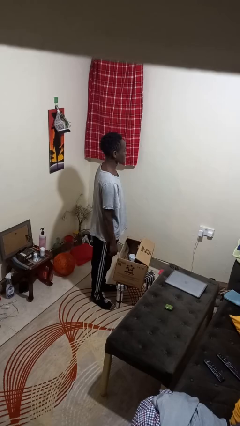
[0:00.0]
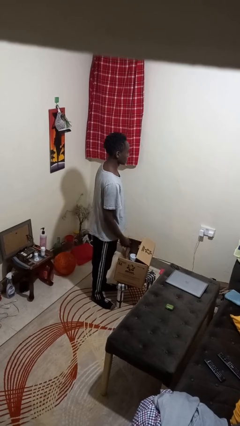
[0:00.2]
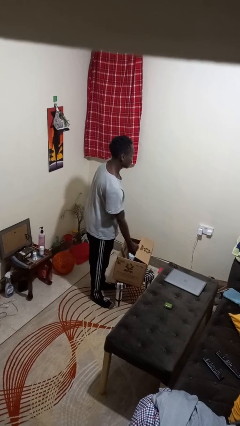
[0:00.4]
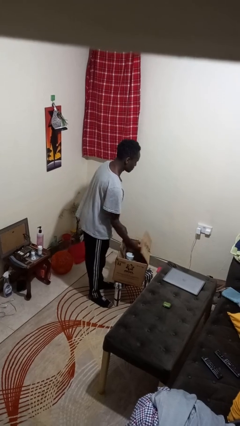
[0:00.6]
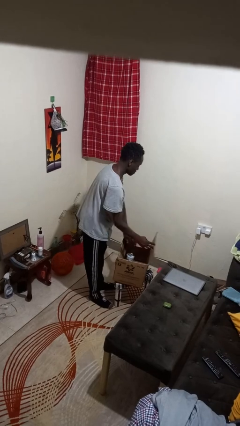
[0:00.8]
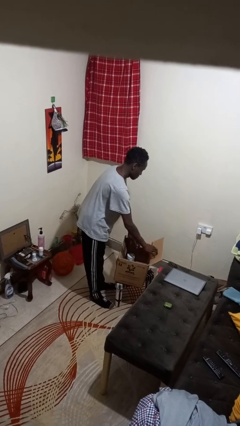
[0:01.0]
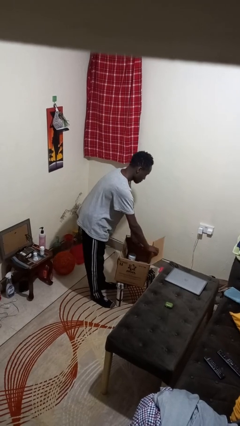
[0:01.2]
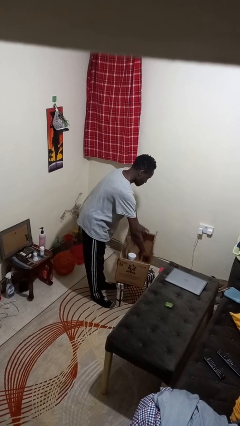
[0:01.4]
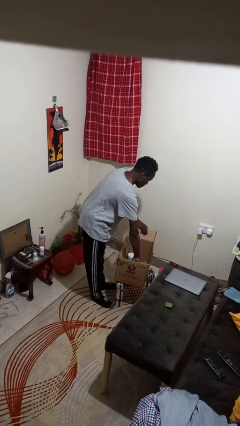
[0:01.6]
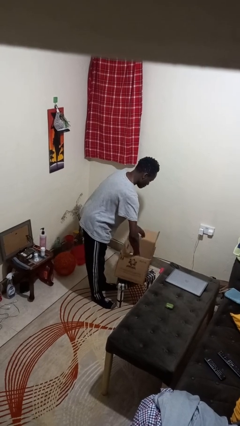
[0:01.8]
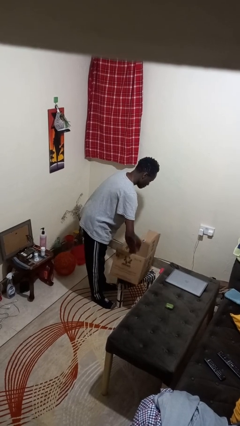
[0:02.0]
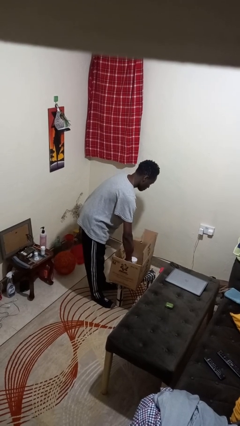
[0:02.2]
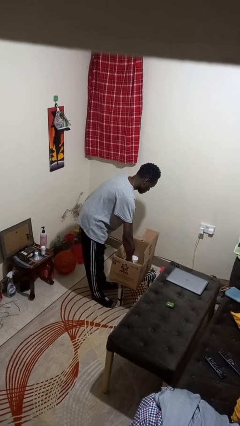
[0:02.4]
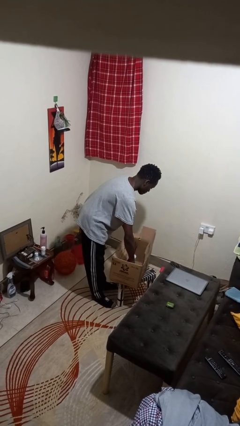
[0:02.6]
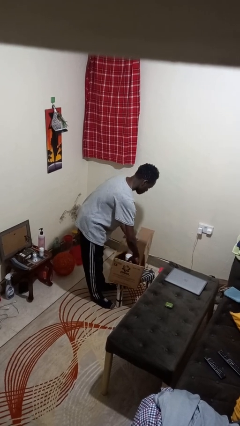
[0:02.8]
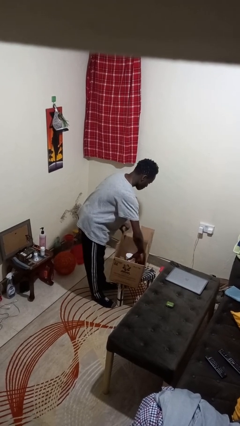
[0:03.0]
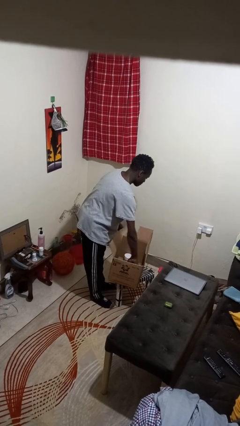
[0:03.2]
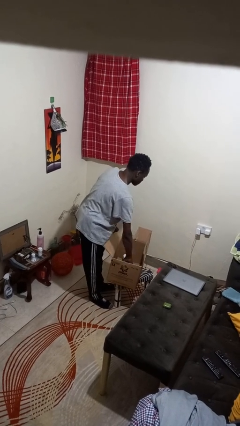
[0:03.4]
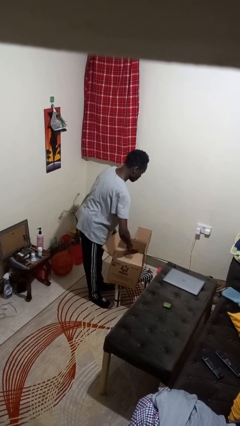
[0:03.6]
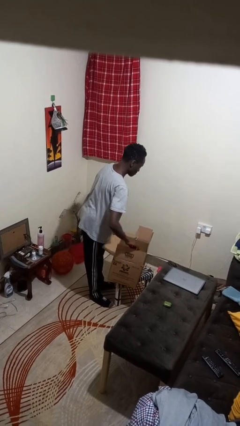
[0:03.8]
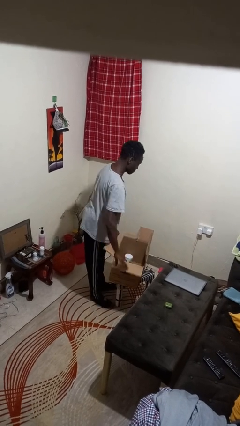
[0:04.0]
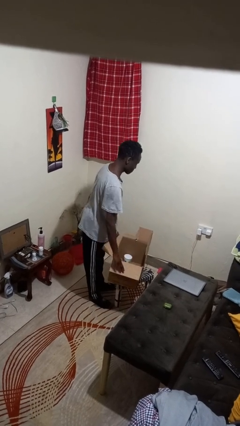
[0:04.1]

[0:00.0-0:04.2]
person opens box

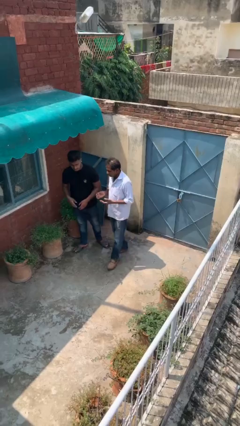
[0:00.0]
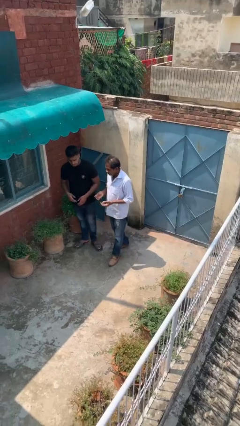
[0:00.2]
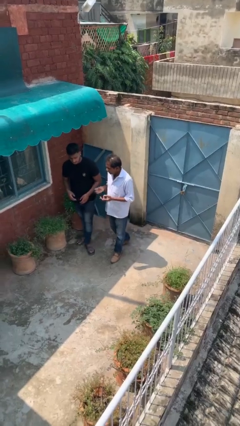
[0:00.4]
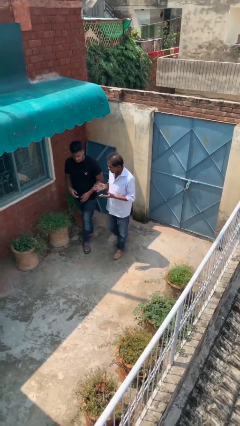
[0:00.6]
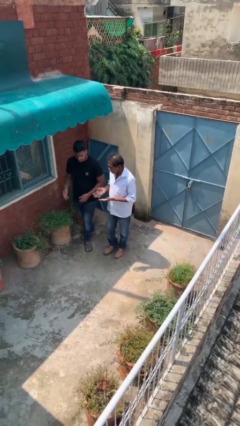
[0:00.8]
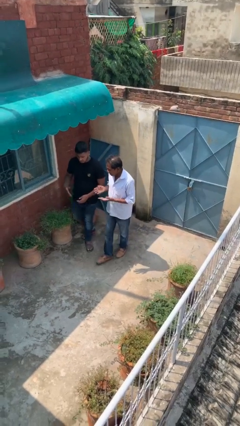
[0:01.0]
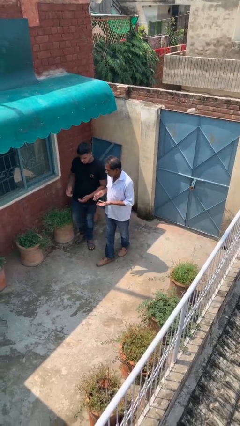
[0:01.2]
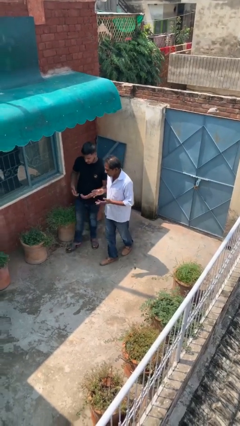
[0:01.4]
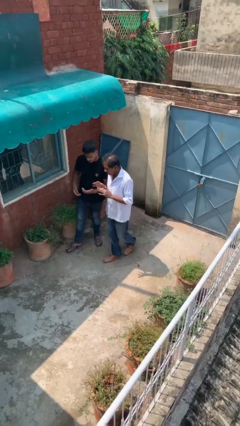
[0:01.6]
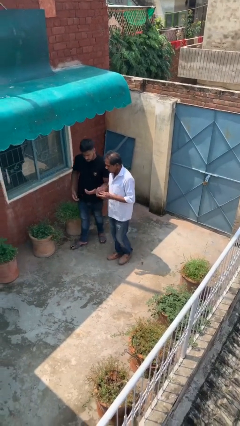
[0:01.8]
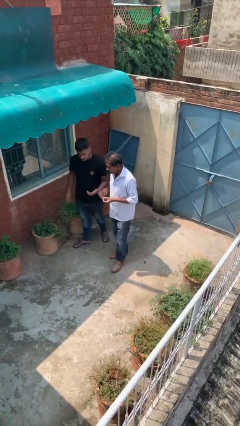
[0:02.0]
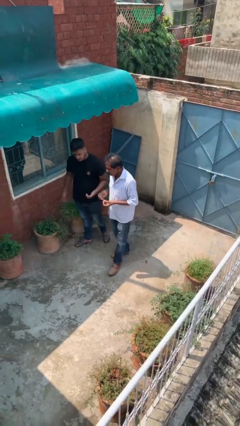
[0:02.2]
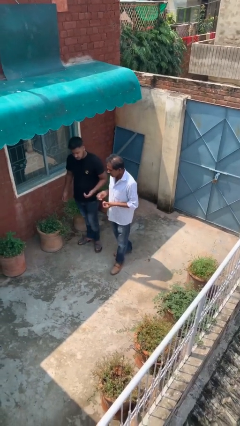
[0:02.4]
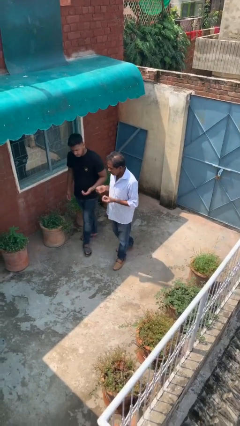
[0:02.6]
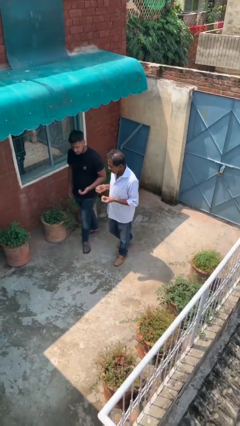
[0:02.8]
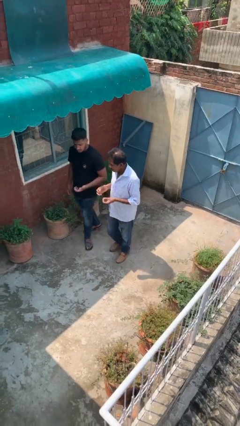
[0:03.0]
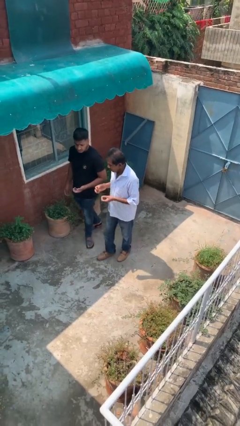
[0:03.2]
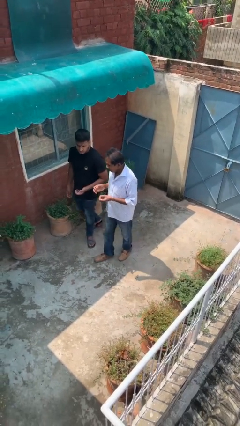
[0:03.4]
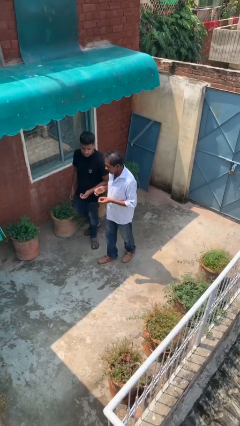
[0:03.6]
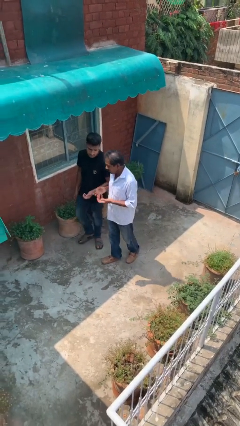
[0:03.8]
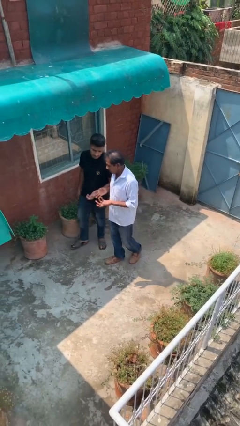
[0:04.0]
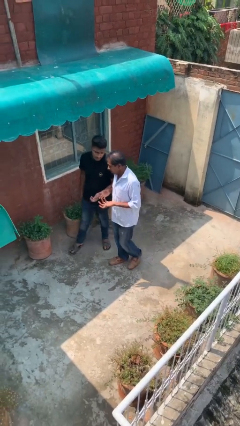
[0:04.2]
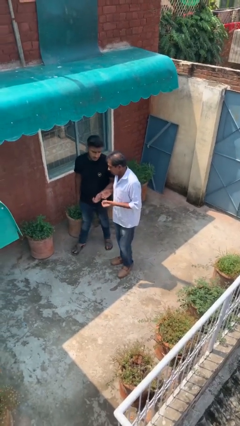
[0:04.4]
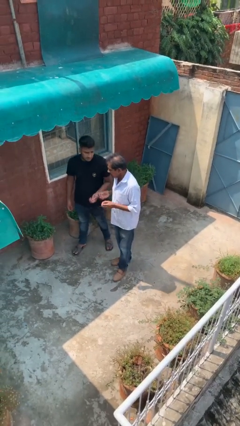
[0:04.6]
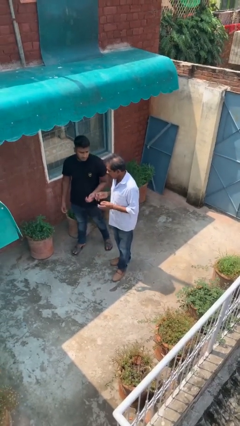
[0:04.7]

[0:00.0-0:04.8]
person talks to person

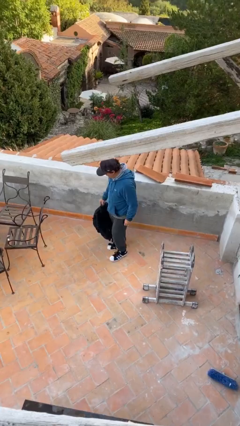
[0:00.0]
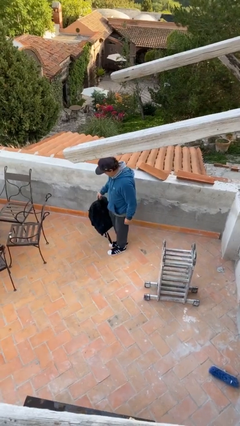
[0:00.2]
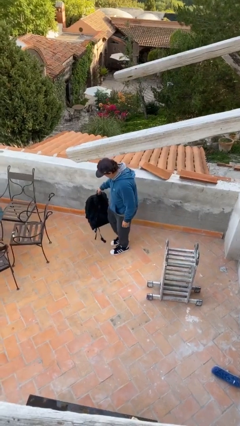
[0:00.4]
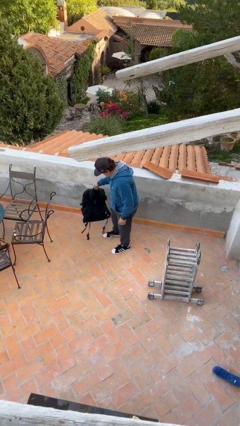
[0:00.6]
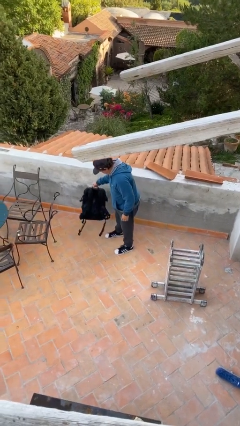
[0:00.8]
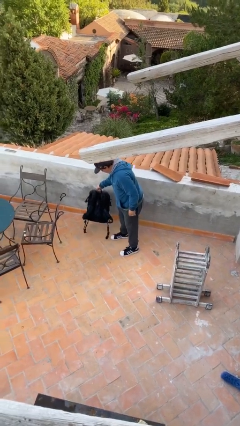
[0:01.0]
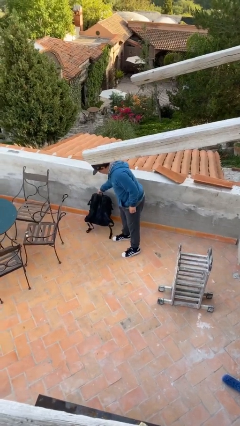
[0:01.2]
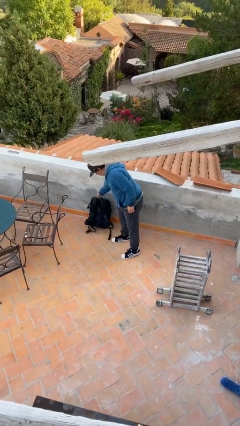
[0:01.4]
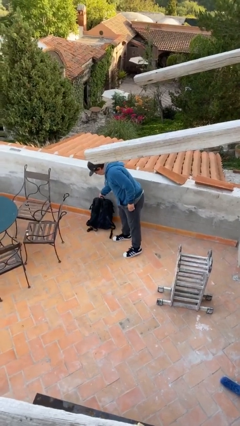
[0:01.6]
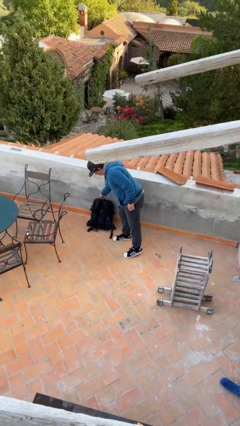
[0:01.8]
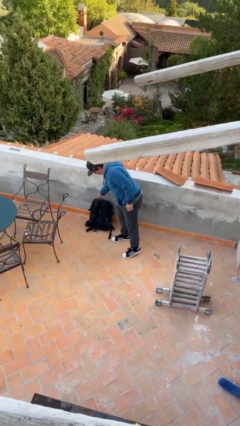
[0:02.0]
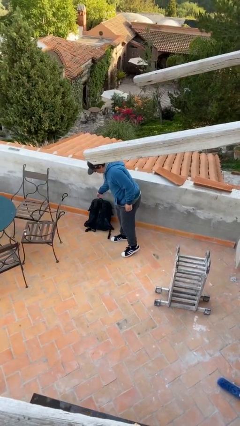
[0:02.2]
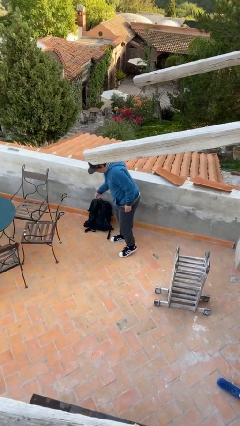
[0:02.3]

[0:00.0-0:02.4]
person puts down object on floor

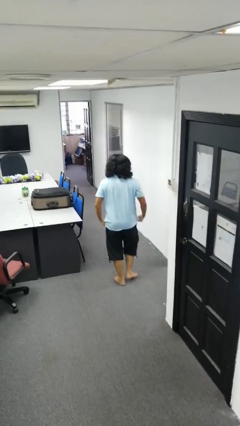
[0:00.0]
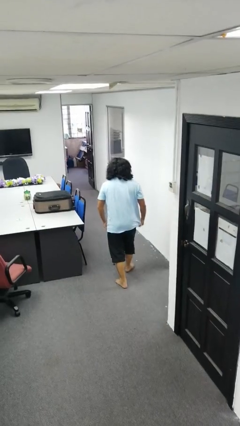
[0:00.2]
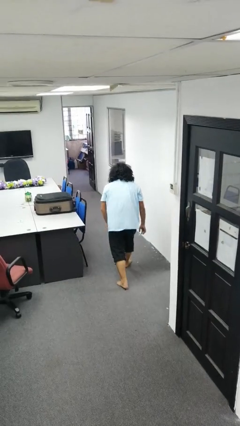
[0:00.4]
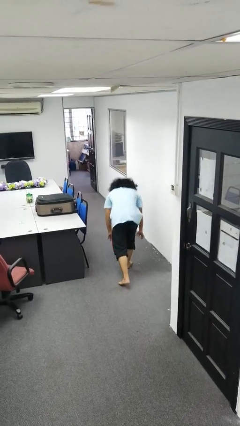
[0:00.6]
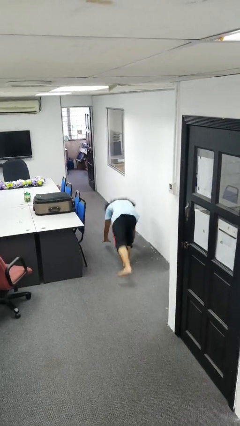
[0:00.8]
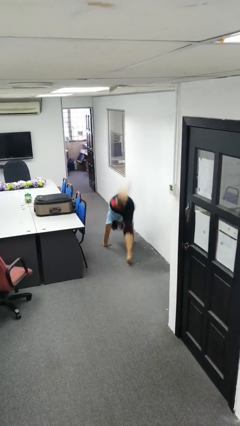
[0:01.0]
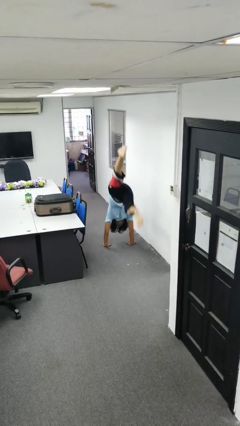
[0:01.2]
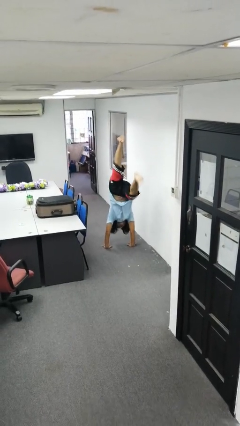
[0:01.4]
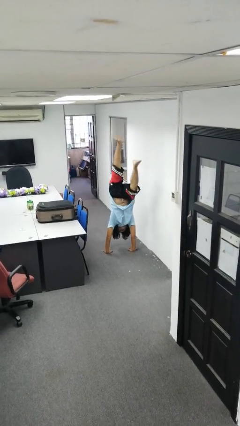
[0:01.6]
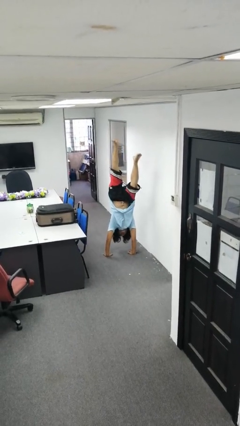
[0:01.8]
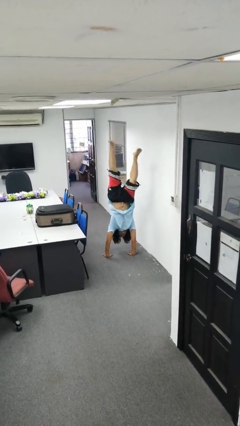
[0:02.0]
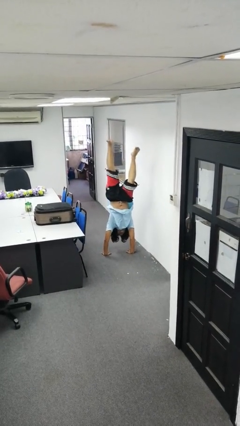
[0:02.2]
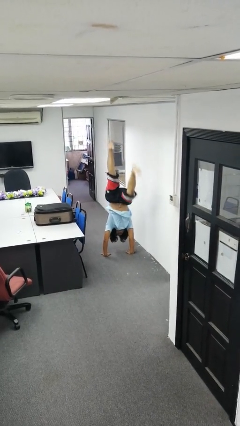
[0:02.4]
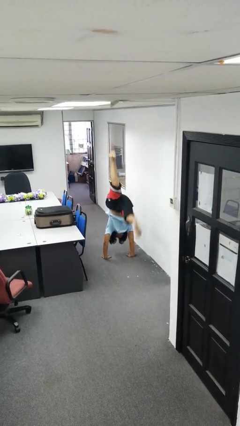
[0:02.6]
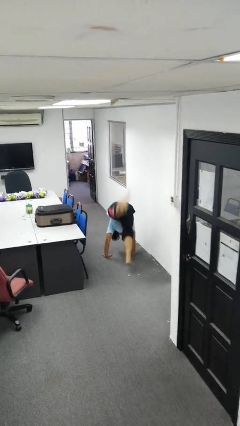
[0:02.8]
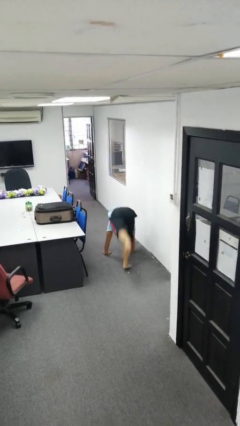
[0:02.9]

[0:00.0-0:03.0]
person handstand

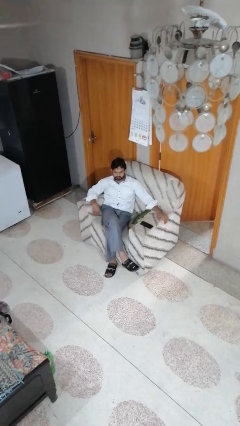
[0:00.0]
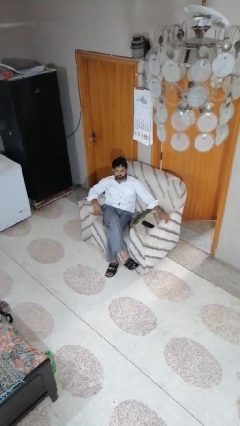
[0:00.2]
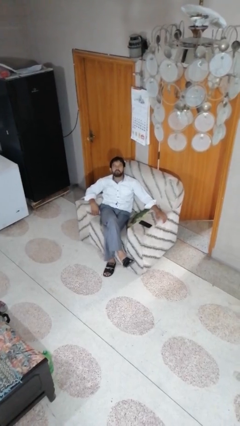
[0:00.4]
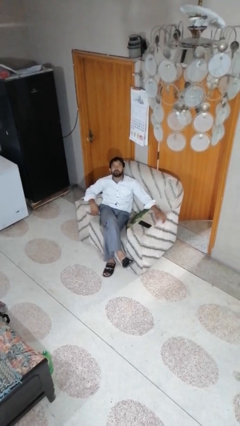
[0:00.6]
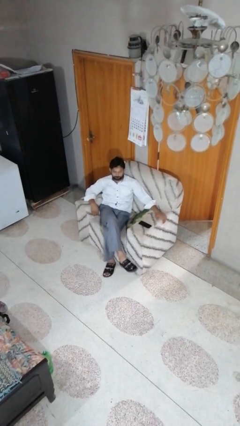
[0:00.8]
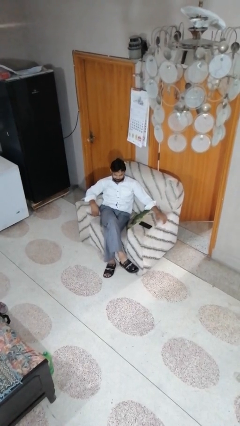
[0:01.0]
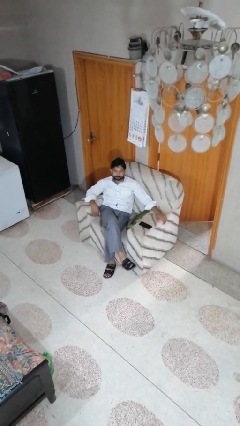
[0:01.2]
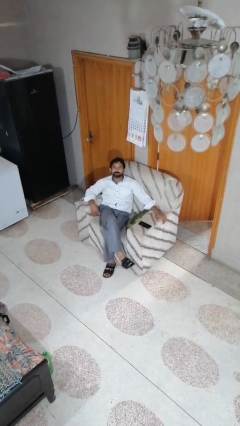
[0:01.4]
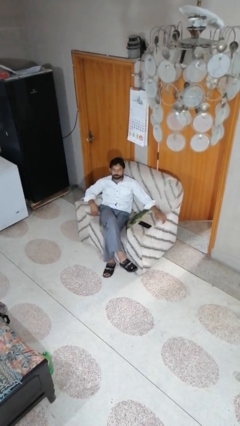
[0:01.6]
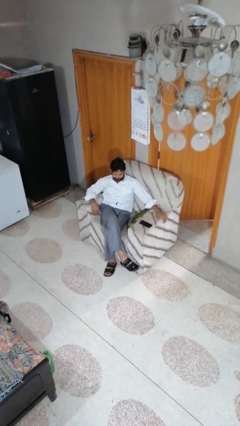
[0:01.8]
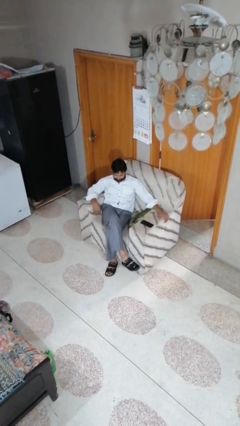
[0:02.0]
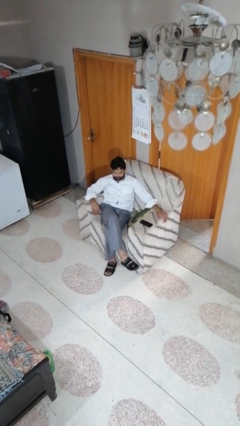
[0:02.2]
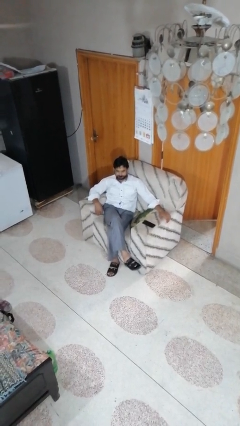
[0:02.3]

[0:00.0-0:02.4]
person nods head

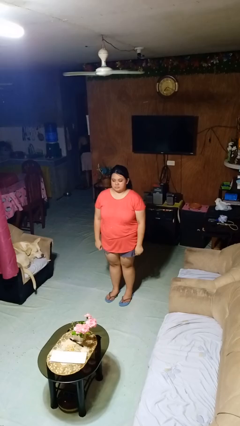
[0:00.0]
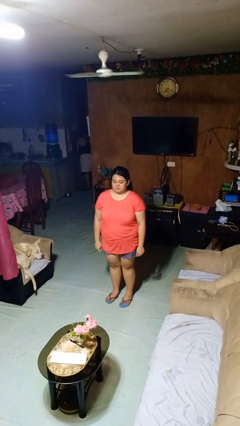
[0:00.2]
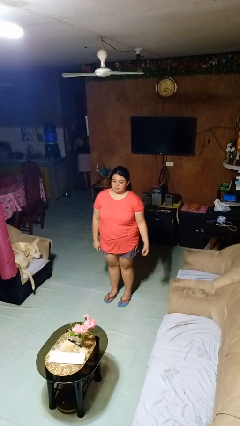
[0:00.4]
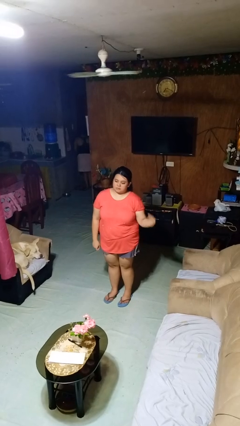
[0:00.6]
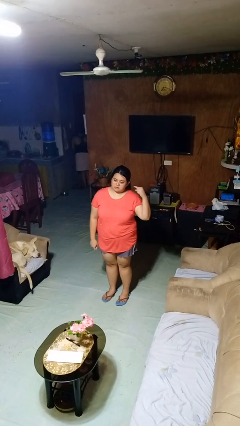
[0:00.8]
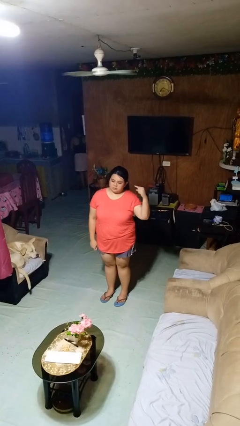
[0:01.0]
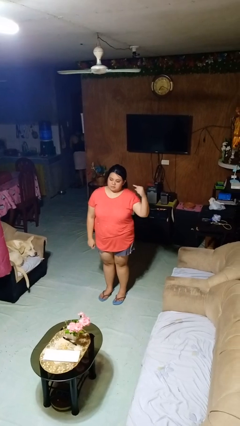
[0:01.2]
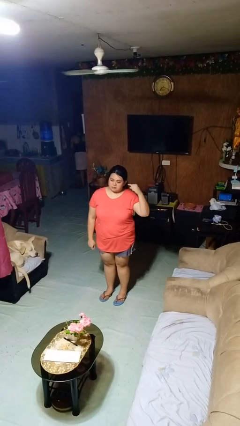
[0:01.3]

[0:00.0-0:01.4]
person gestures listen closely
